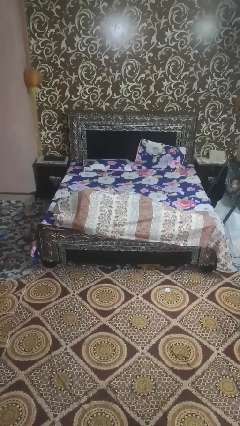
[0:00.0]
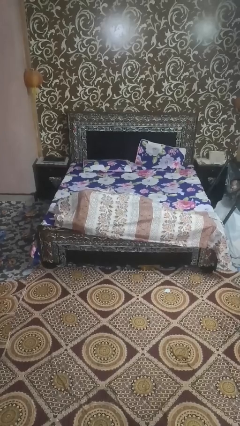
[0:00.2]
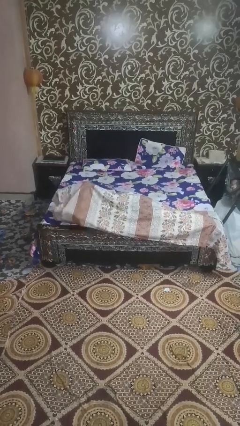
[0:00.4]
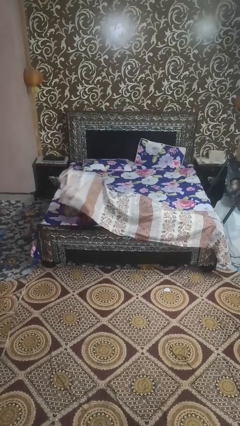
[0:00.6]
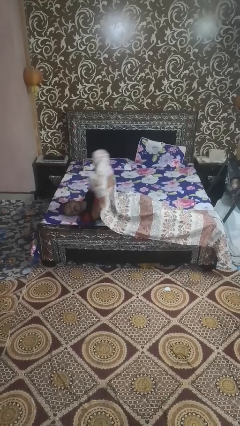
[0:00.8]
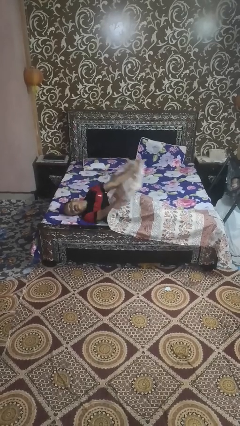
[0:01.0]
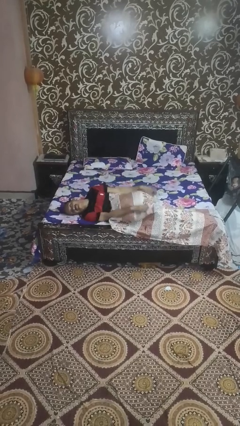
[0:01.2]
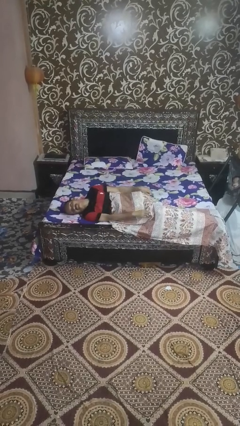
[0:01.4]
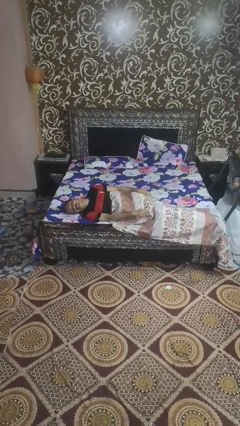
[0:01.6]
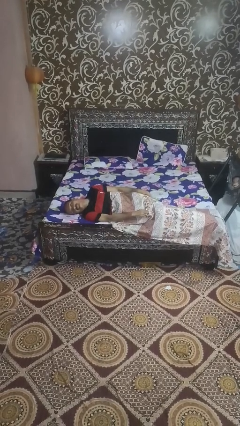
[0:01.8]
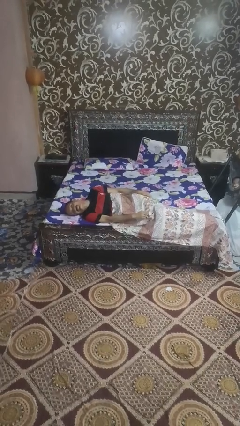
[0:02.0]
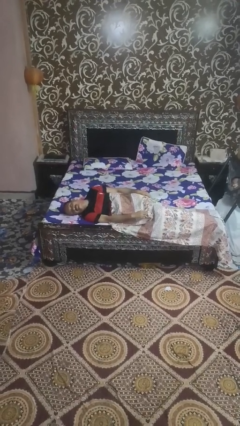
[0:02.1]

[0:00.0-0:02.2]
person uncovers with bedsheets

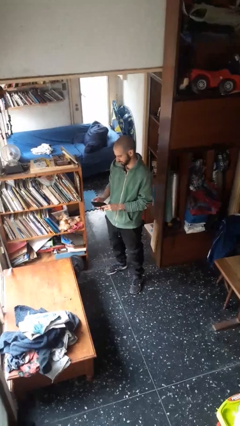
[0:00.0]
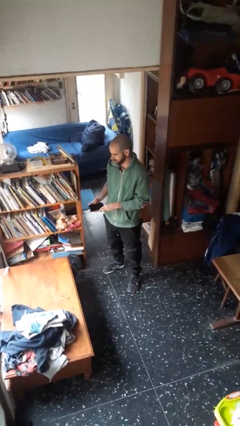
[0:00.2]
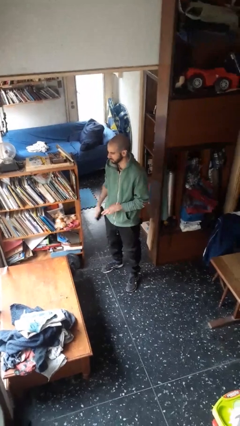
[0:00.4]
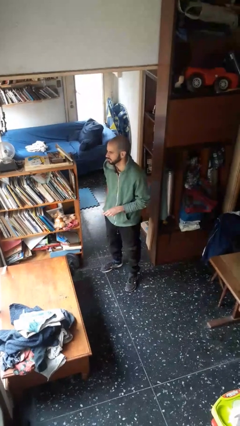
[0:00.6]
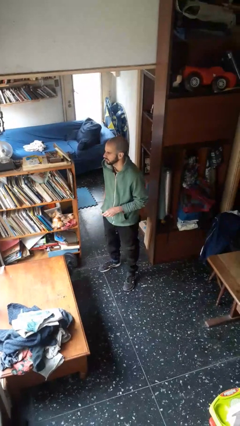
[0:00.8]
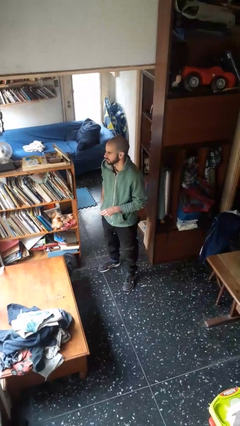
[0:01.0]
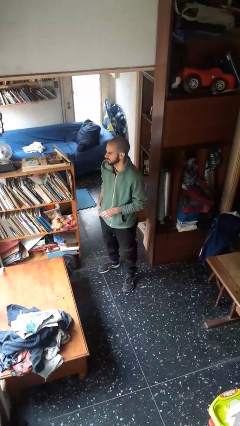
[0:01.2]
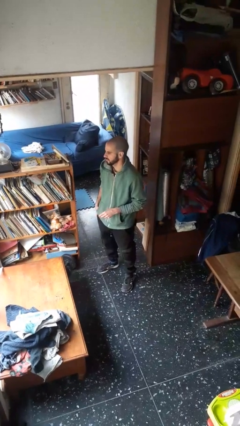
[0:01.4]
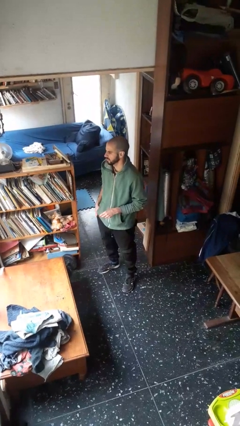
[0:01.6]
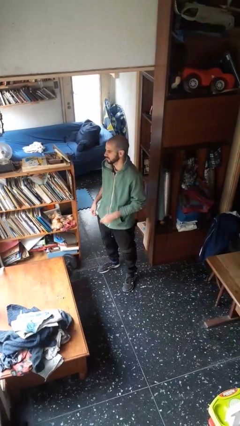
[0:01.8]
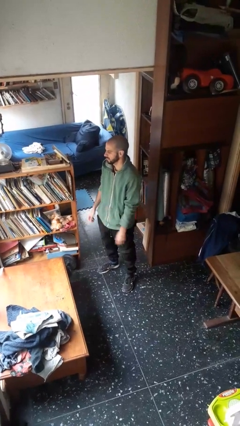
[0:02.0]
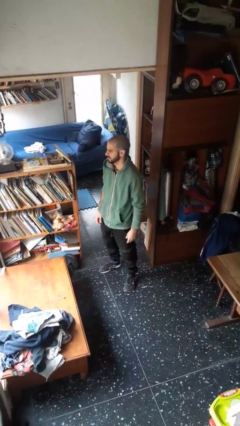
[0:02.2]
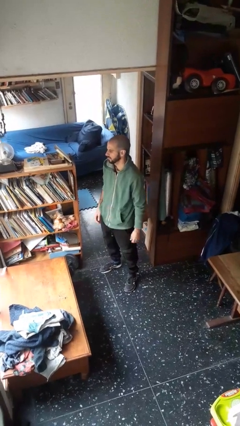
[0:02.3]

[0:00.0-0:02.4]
person puts phone into pocket

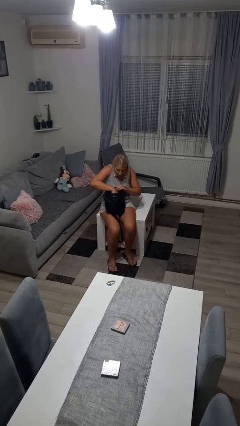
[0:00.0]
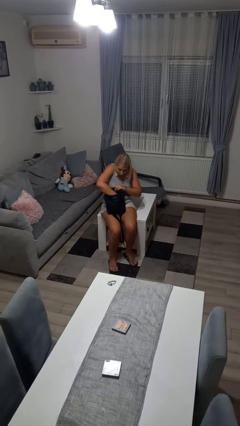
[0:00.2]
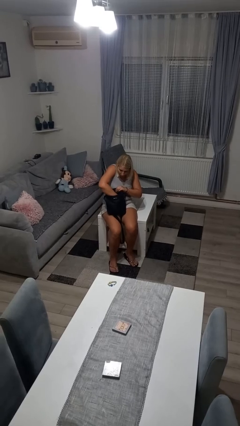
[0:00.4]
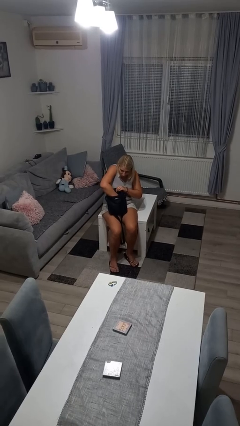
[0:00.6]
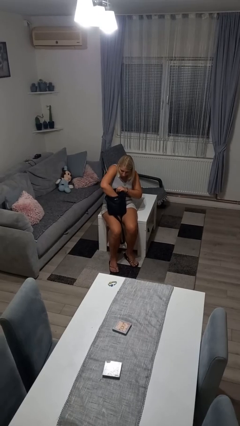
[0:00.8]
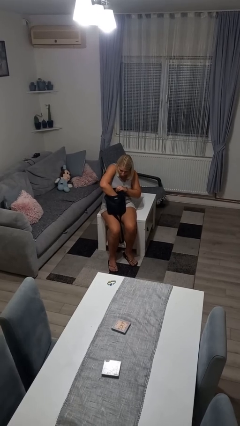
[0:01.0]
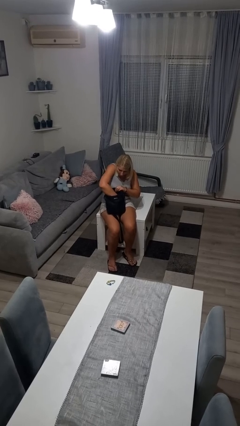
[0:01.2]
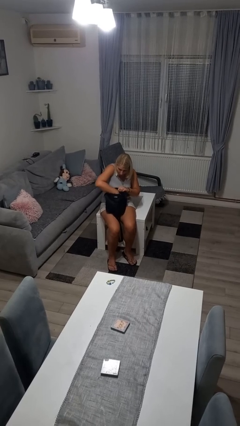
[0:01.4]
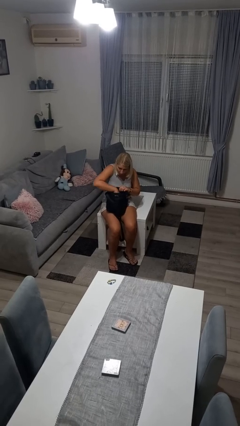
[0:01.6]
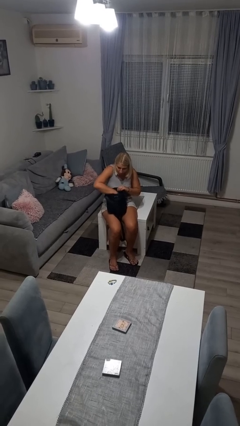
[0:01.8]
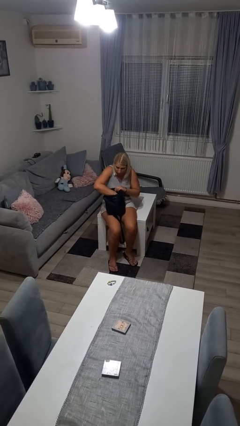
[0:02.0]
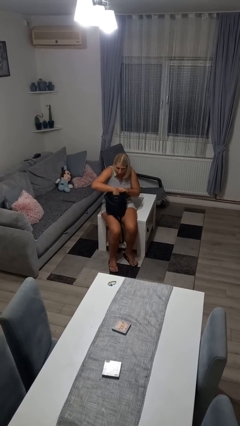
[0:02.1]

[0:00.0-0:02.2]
person searches in bag

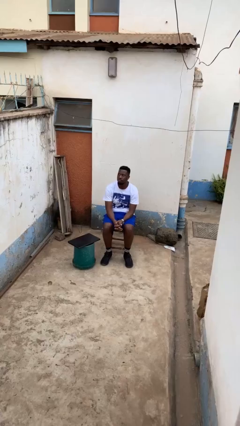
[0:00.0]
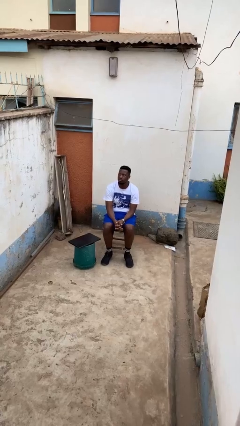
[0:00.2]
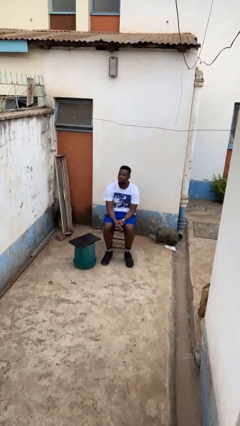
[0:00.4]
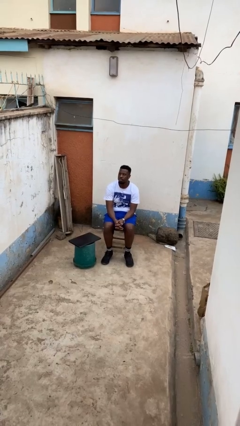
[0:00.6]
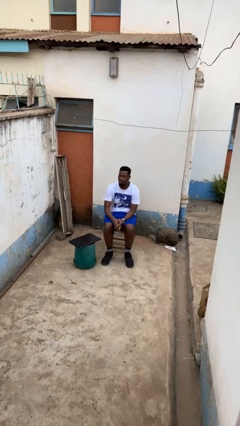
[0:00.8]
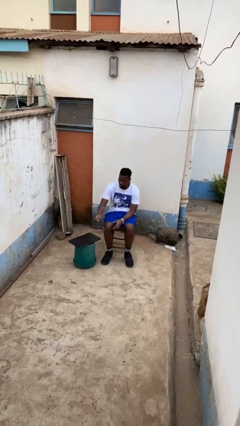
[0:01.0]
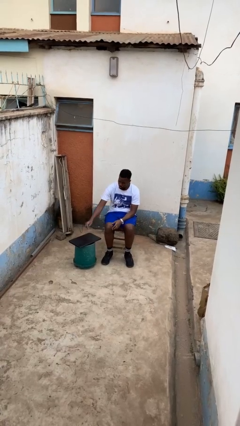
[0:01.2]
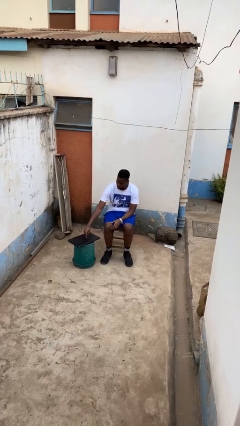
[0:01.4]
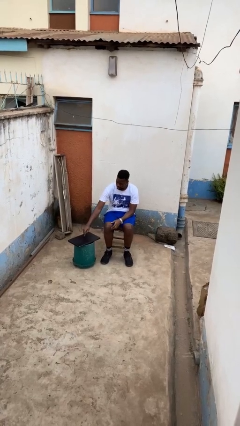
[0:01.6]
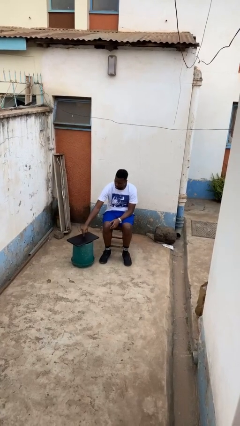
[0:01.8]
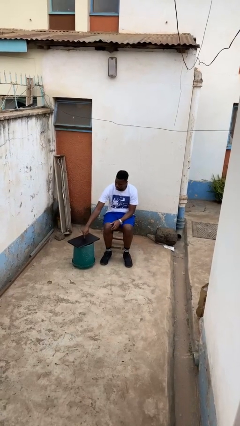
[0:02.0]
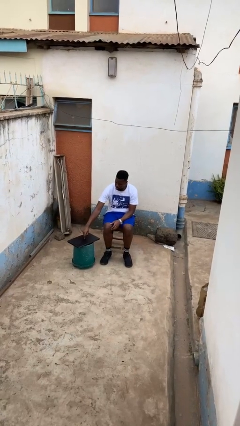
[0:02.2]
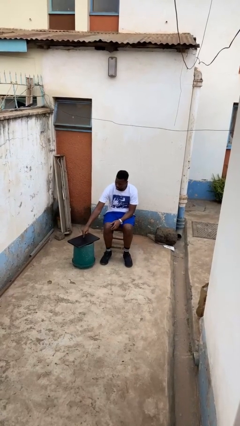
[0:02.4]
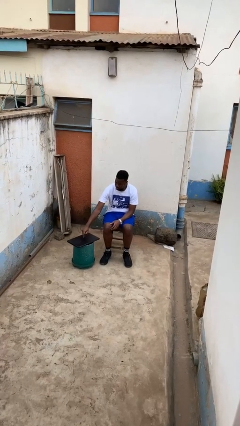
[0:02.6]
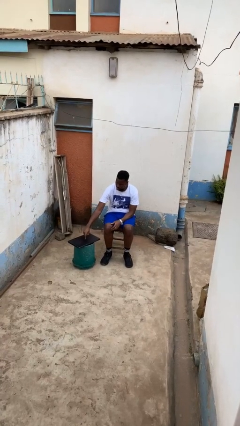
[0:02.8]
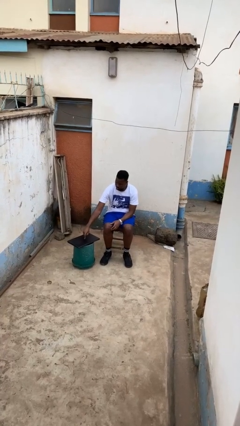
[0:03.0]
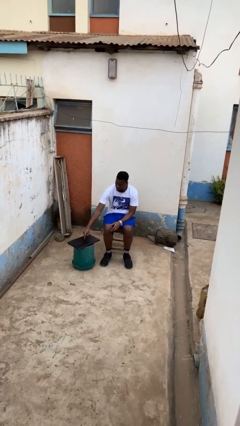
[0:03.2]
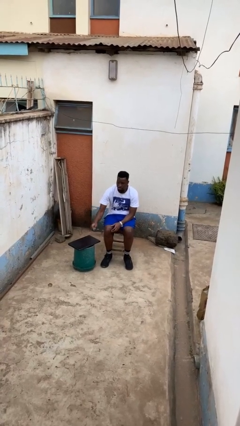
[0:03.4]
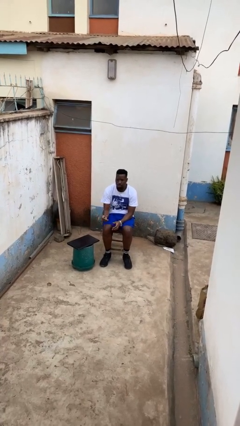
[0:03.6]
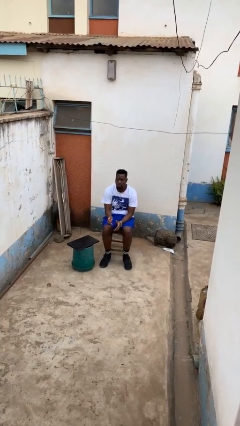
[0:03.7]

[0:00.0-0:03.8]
person taps object with finger

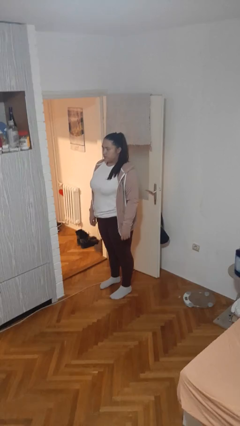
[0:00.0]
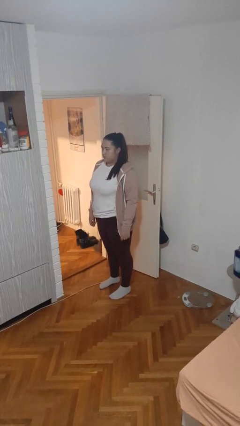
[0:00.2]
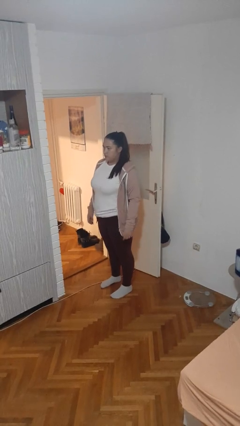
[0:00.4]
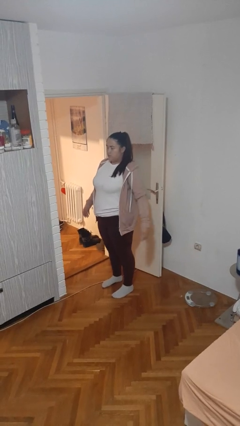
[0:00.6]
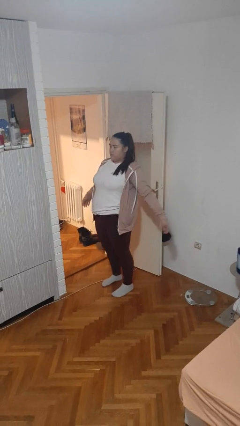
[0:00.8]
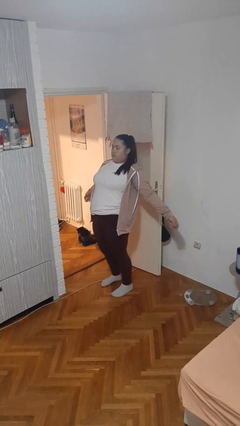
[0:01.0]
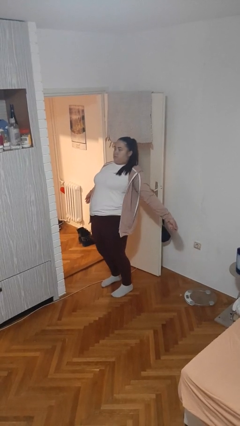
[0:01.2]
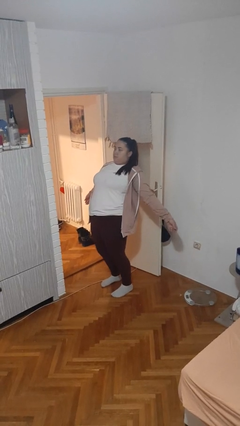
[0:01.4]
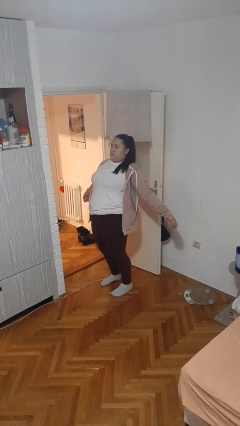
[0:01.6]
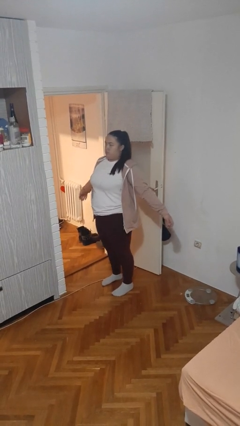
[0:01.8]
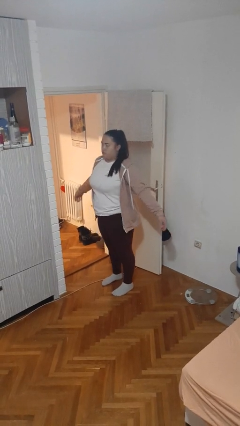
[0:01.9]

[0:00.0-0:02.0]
person stretches back

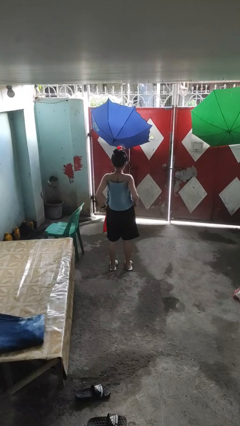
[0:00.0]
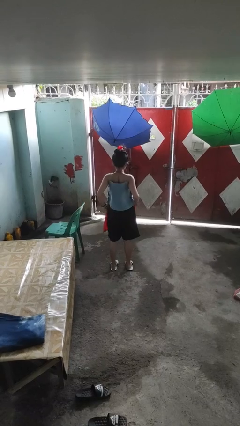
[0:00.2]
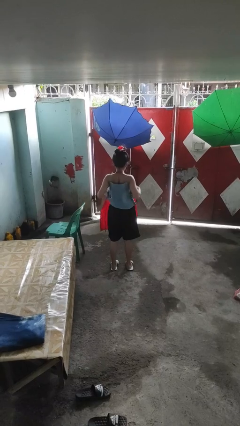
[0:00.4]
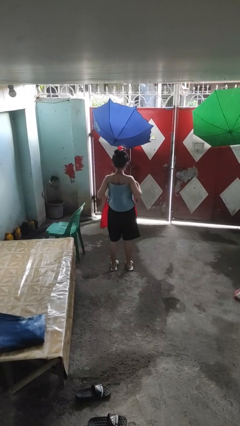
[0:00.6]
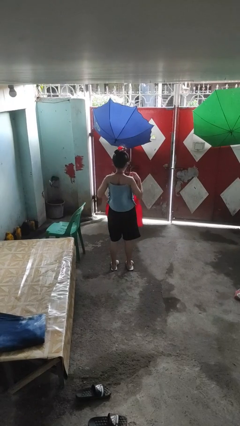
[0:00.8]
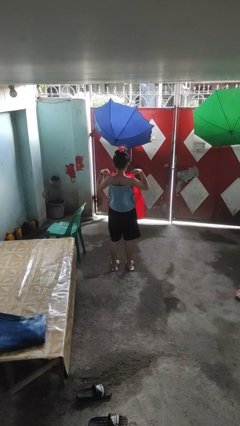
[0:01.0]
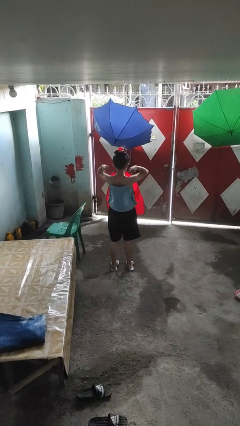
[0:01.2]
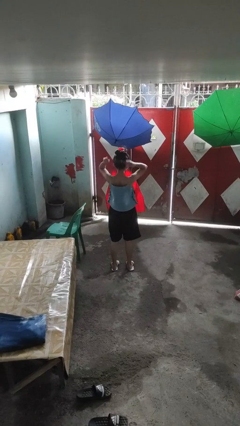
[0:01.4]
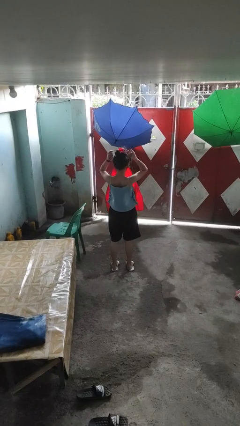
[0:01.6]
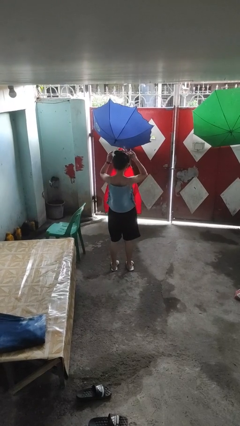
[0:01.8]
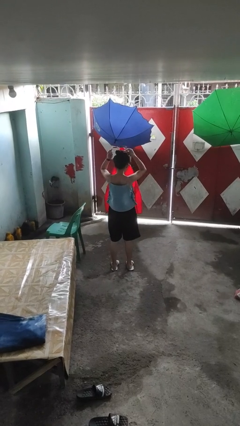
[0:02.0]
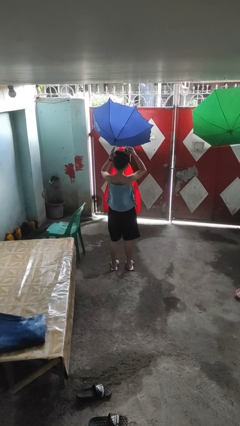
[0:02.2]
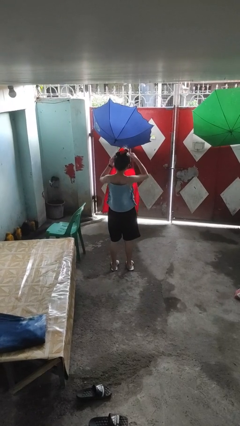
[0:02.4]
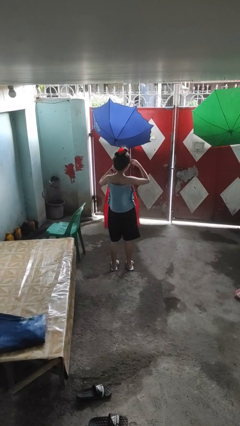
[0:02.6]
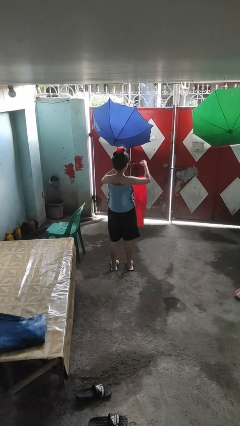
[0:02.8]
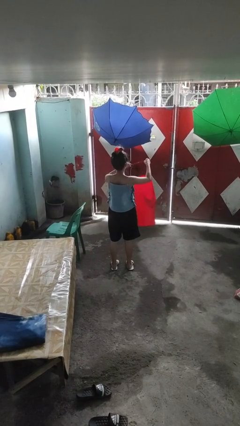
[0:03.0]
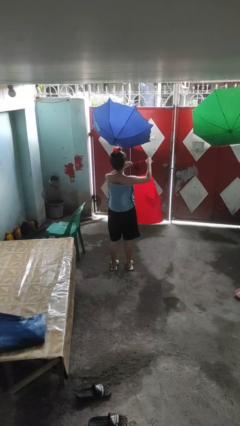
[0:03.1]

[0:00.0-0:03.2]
person takes off apron

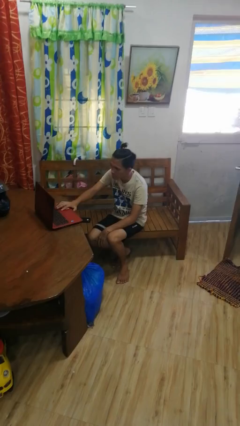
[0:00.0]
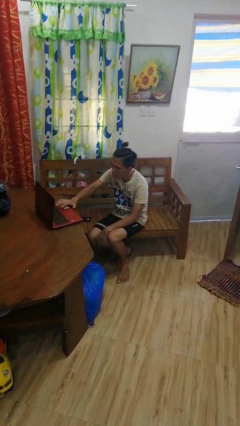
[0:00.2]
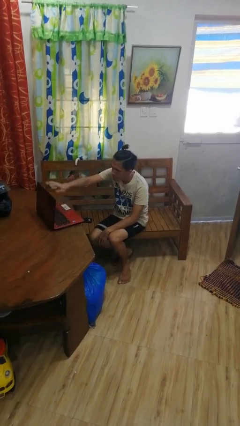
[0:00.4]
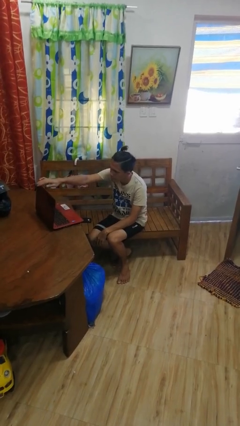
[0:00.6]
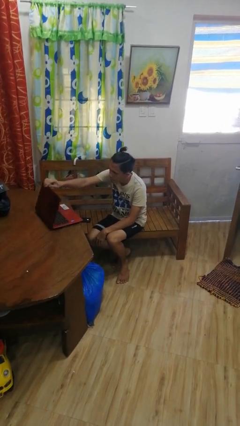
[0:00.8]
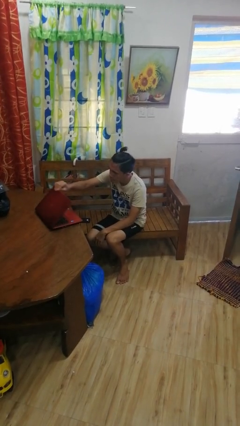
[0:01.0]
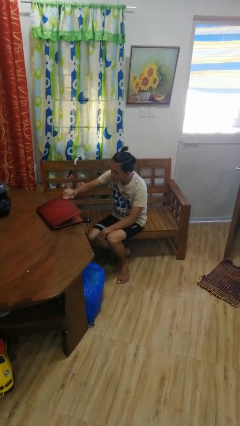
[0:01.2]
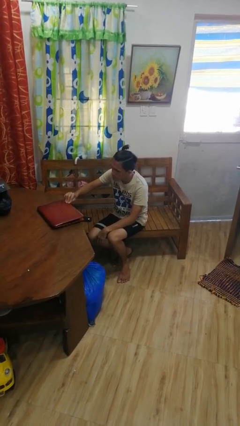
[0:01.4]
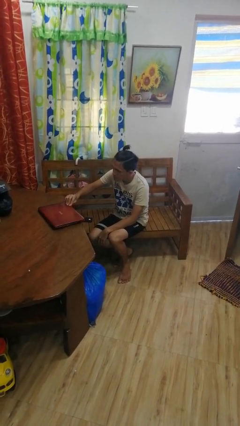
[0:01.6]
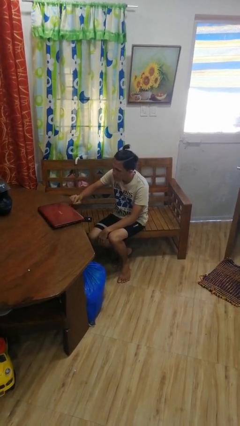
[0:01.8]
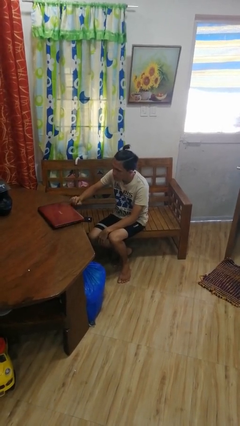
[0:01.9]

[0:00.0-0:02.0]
person closes laptop
